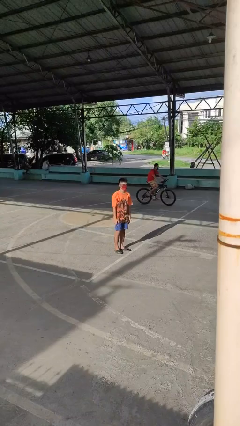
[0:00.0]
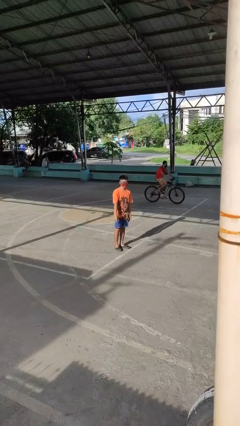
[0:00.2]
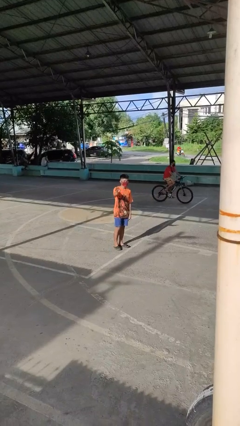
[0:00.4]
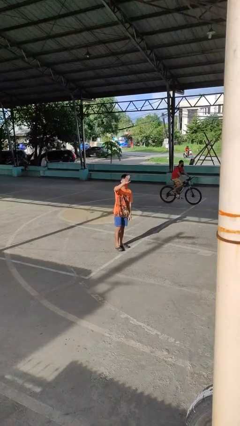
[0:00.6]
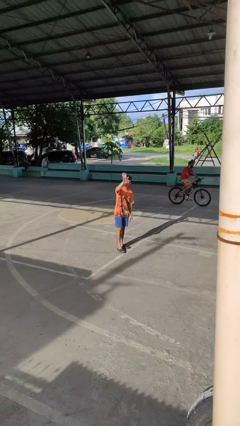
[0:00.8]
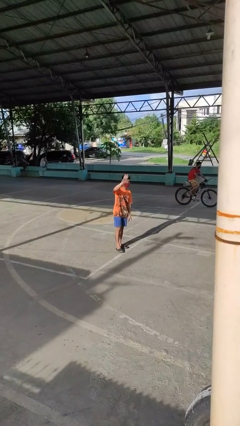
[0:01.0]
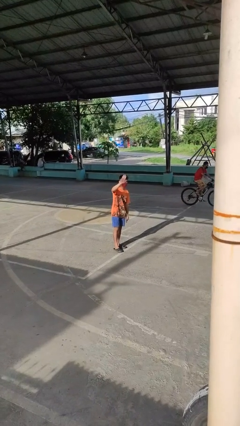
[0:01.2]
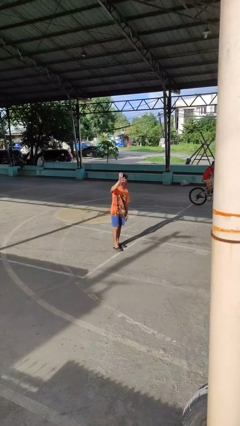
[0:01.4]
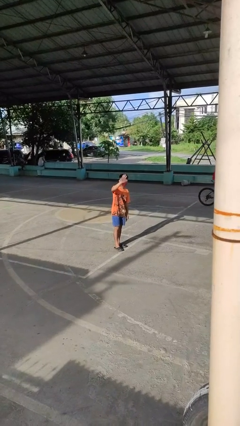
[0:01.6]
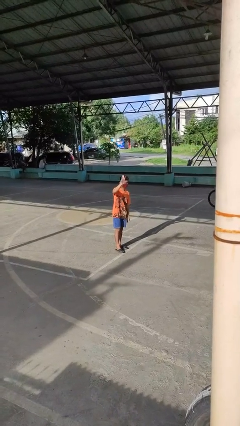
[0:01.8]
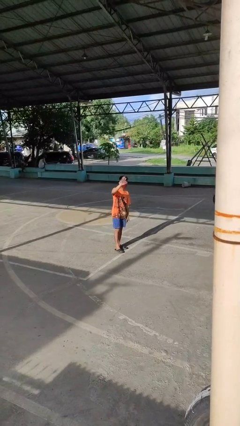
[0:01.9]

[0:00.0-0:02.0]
person waves at person

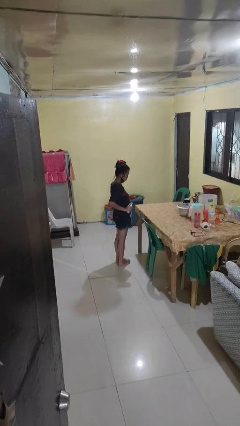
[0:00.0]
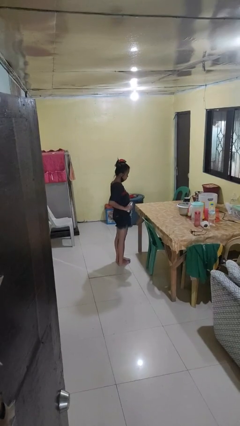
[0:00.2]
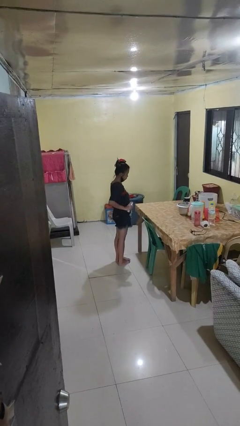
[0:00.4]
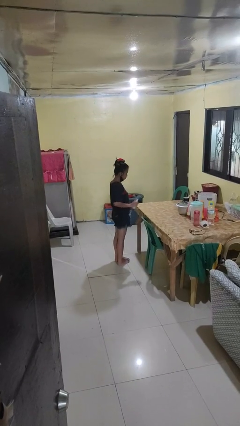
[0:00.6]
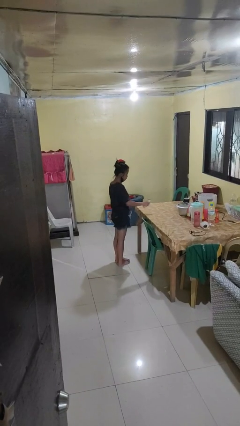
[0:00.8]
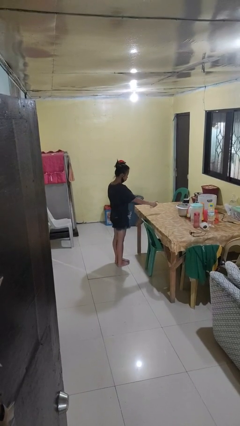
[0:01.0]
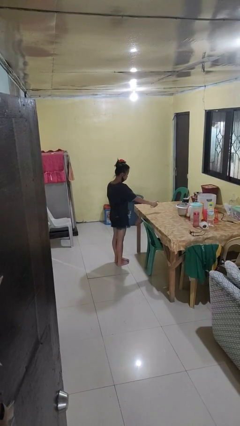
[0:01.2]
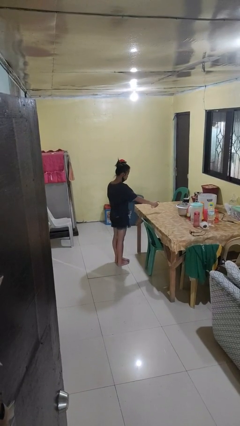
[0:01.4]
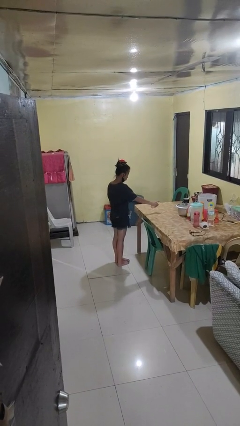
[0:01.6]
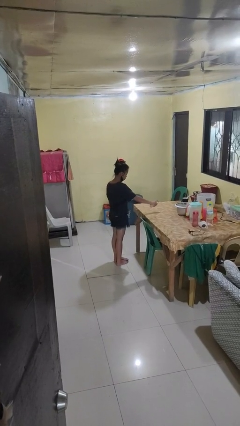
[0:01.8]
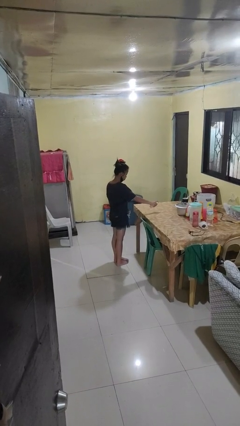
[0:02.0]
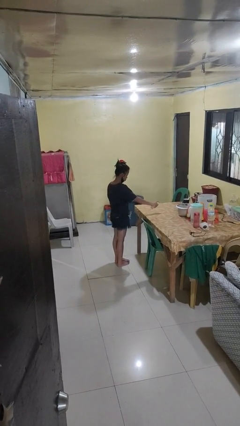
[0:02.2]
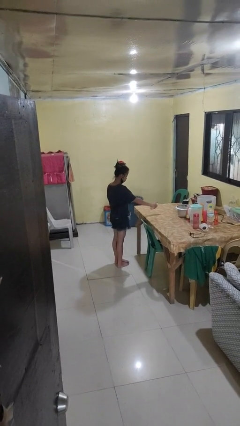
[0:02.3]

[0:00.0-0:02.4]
person sprays from bottle

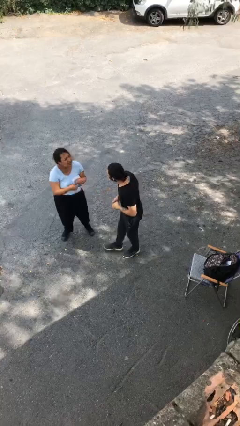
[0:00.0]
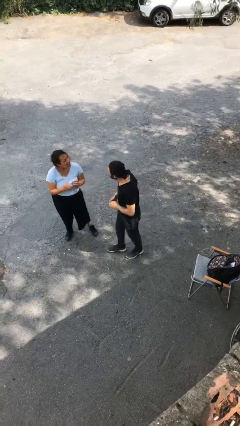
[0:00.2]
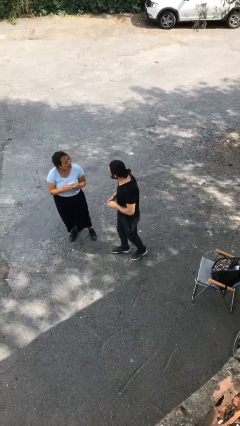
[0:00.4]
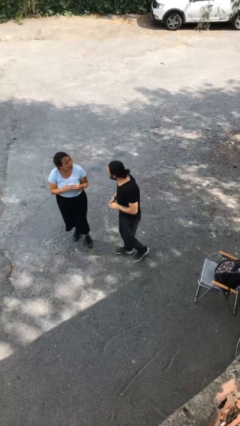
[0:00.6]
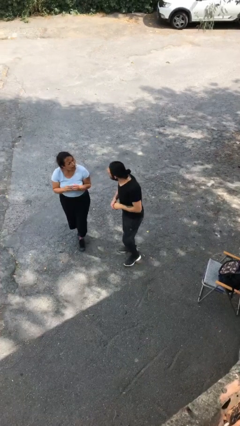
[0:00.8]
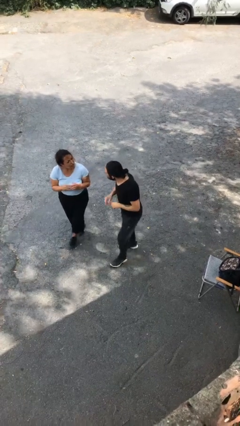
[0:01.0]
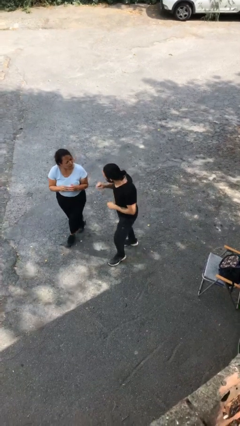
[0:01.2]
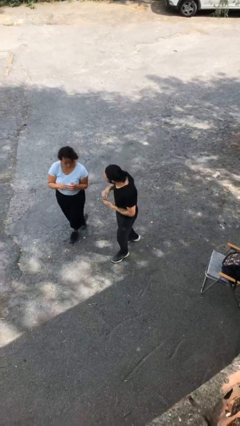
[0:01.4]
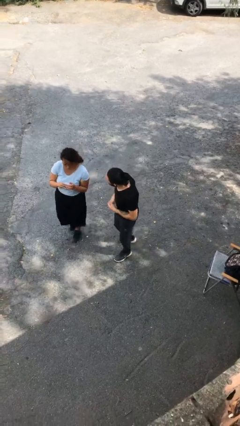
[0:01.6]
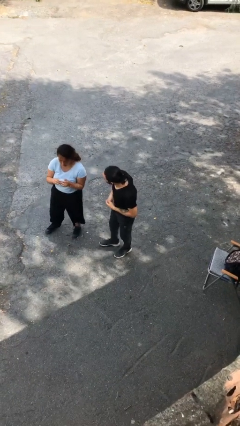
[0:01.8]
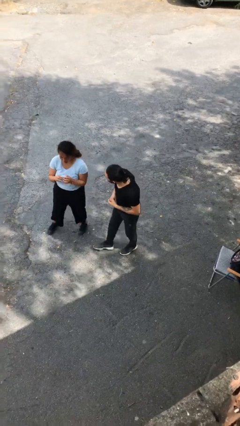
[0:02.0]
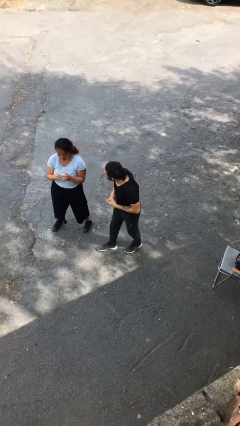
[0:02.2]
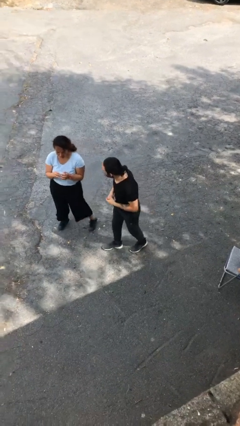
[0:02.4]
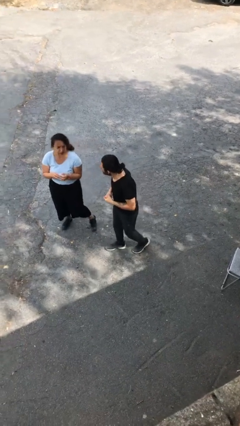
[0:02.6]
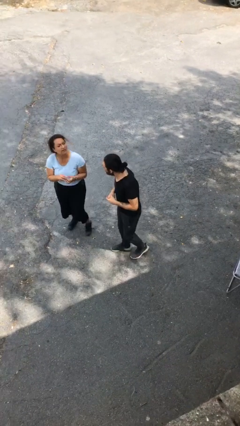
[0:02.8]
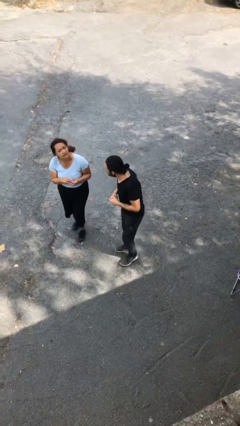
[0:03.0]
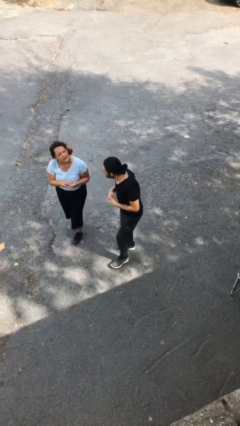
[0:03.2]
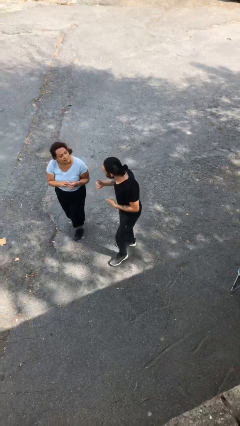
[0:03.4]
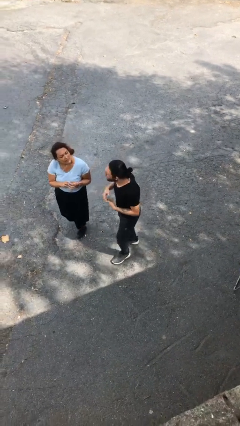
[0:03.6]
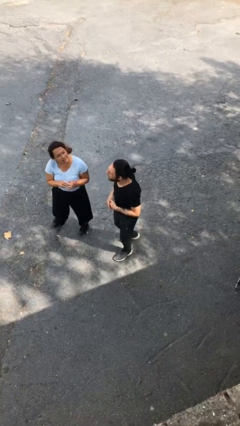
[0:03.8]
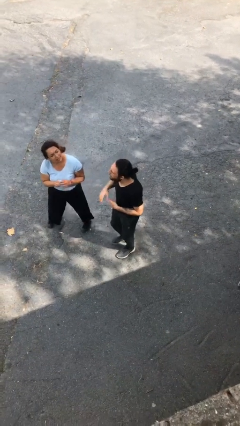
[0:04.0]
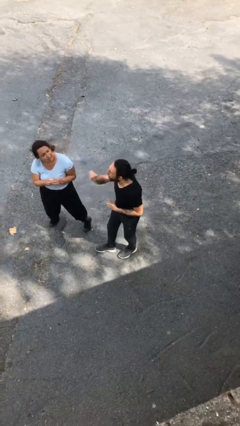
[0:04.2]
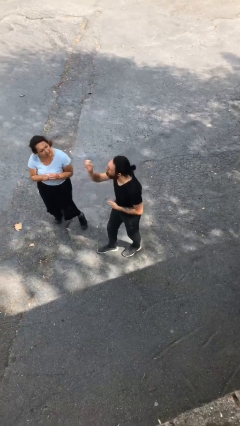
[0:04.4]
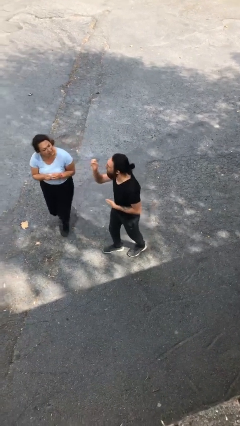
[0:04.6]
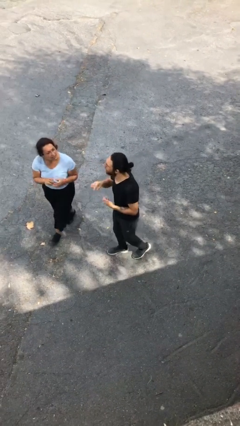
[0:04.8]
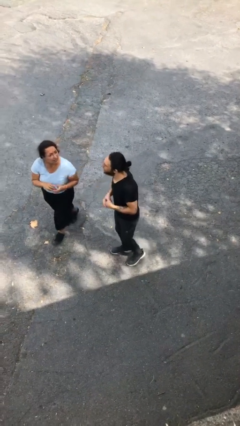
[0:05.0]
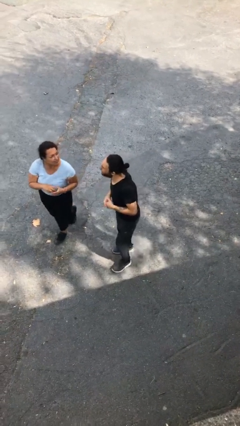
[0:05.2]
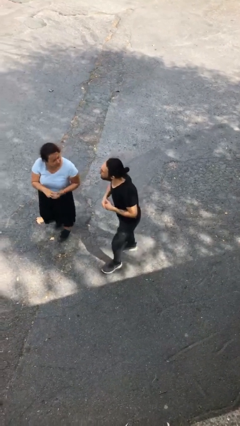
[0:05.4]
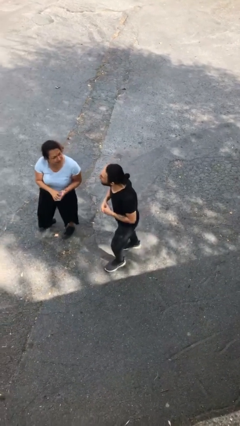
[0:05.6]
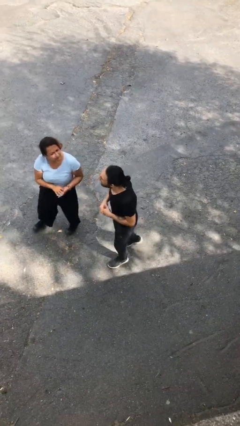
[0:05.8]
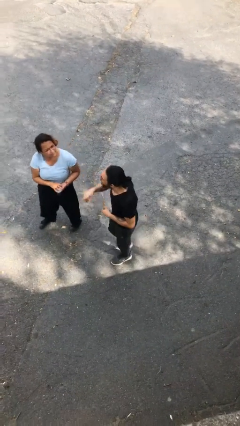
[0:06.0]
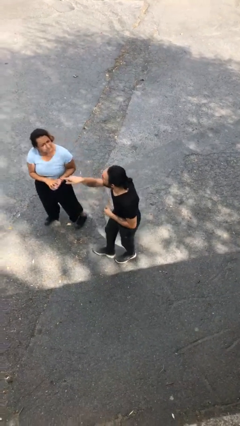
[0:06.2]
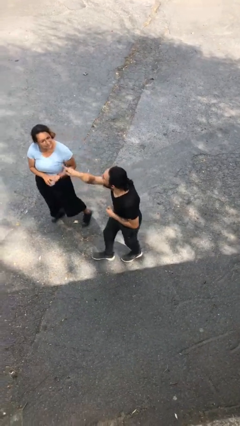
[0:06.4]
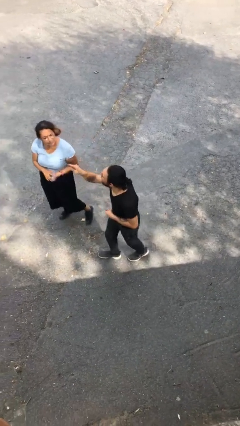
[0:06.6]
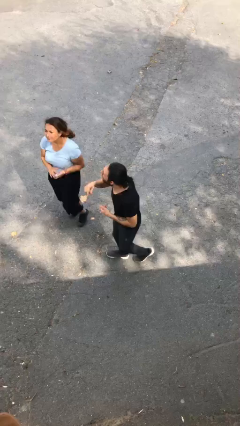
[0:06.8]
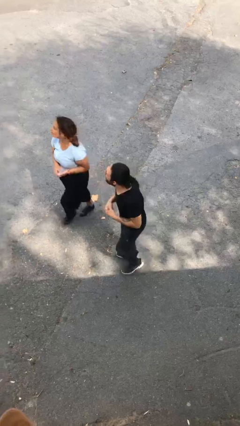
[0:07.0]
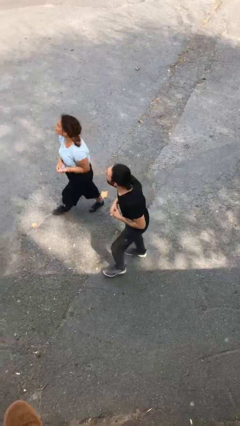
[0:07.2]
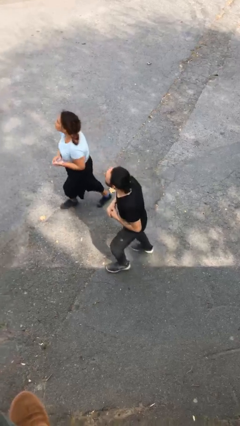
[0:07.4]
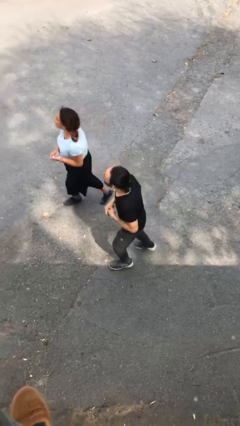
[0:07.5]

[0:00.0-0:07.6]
person talks to person

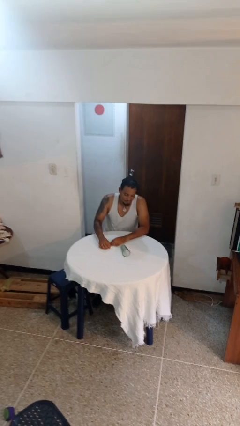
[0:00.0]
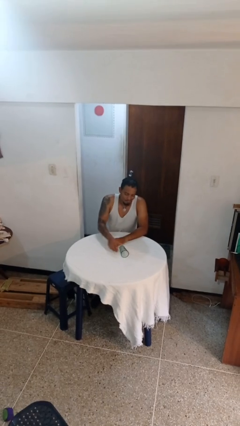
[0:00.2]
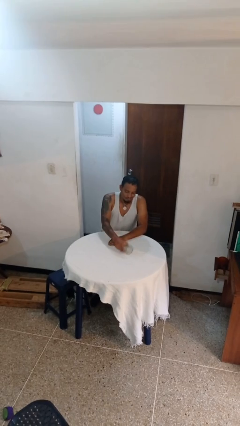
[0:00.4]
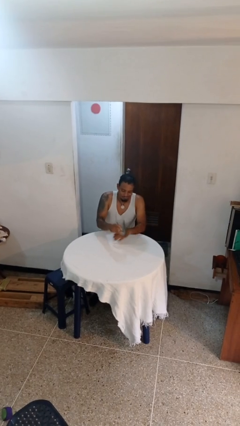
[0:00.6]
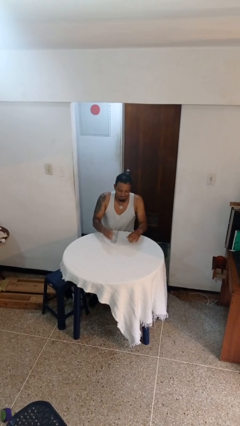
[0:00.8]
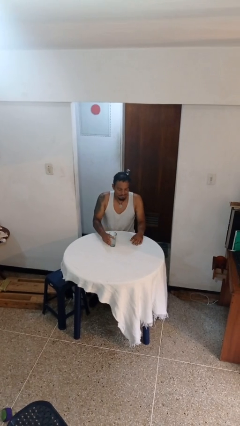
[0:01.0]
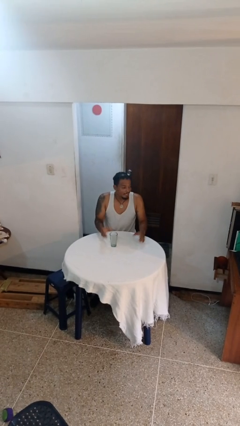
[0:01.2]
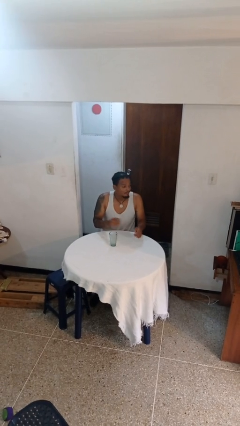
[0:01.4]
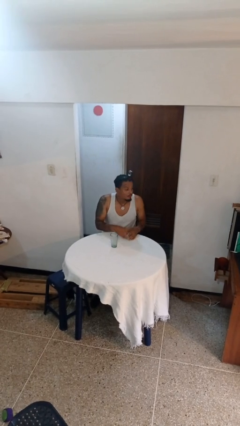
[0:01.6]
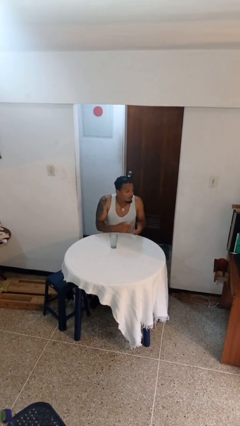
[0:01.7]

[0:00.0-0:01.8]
person sets upright glass

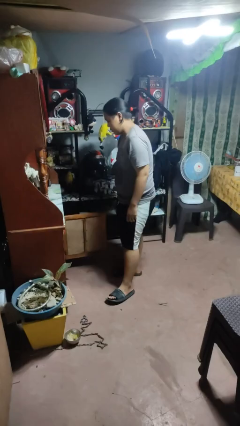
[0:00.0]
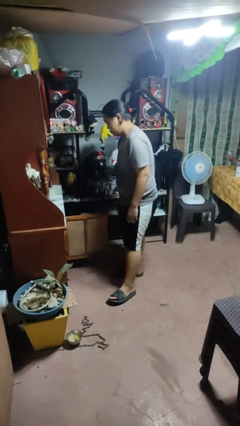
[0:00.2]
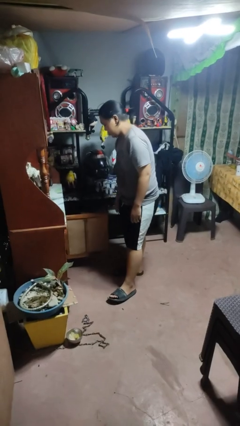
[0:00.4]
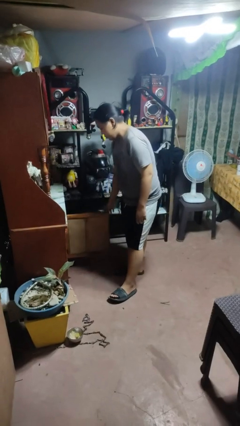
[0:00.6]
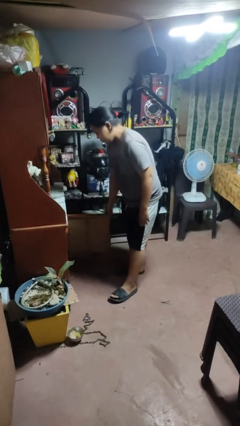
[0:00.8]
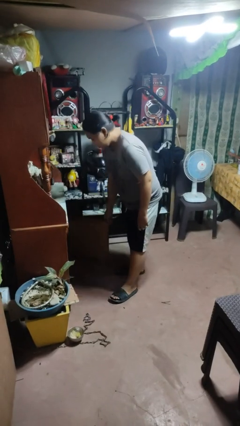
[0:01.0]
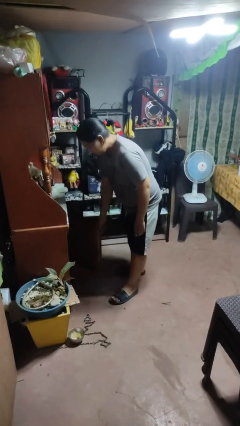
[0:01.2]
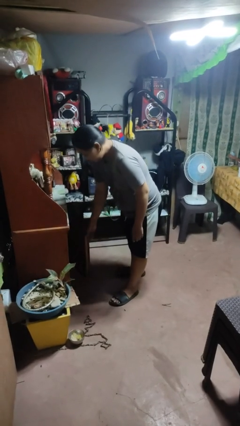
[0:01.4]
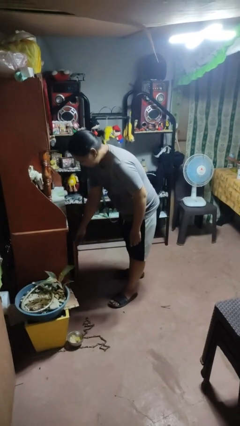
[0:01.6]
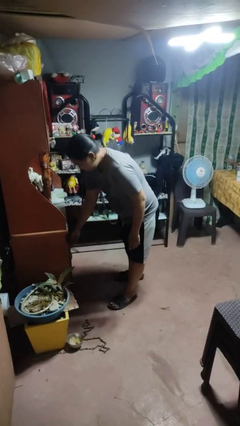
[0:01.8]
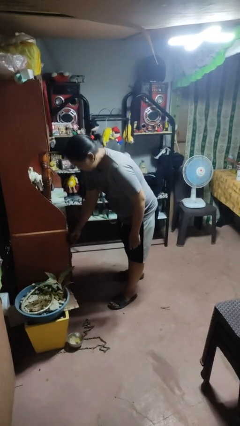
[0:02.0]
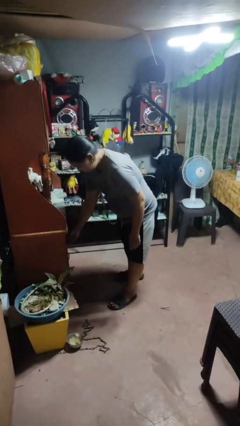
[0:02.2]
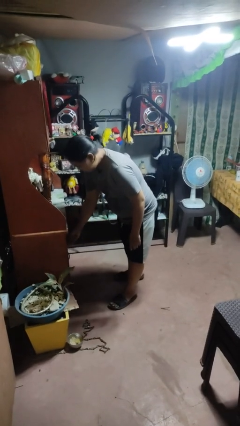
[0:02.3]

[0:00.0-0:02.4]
person closes cabinet

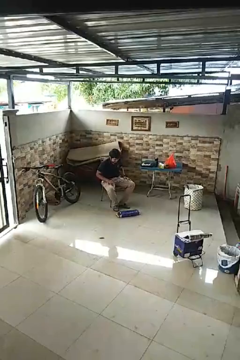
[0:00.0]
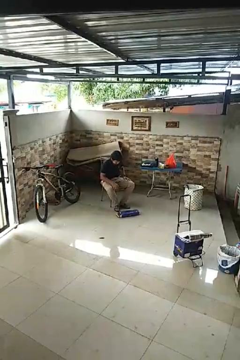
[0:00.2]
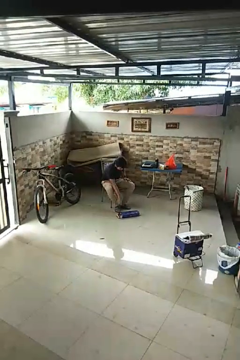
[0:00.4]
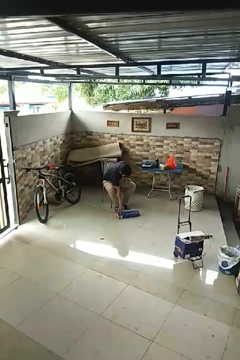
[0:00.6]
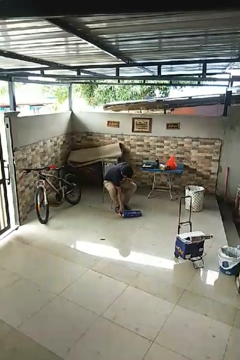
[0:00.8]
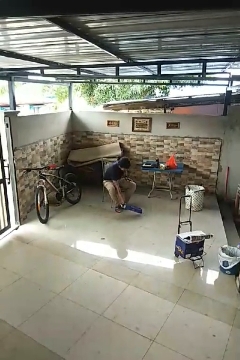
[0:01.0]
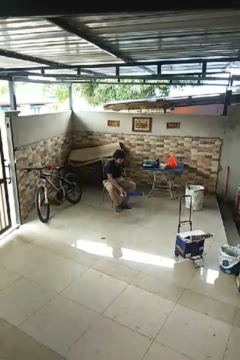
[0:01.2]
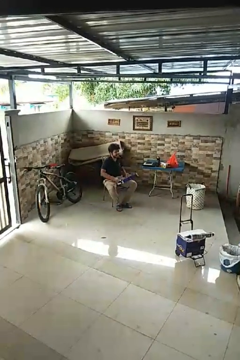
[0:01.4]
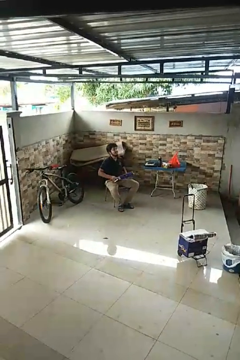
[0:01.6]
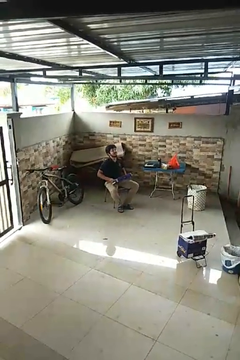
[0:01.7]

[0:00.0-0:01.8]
person picks up object from floor
